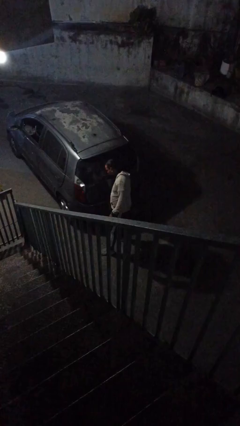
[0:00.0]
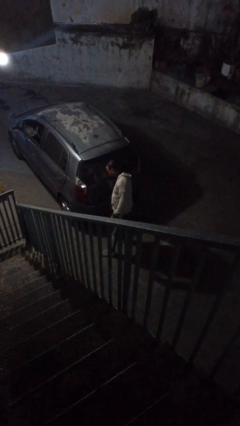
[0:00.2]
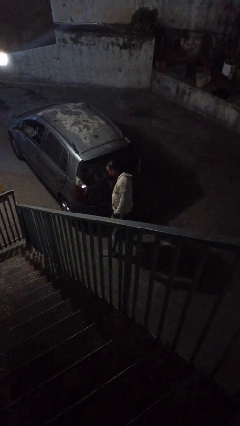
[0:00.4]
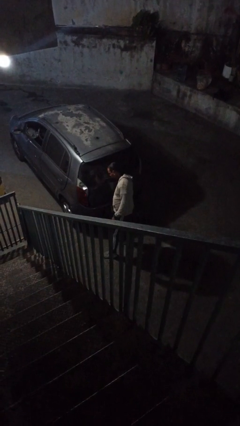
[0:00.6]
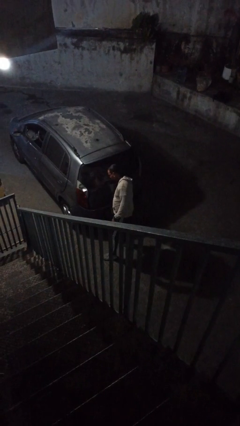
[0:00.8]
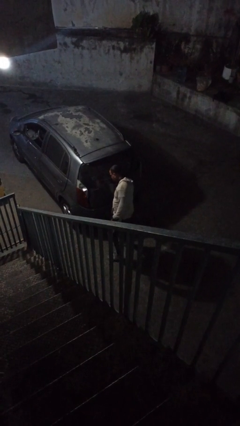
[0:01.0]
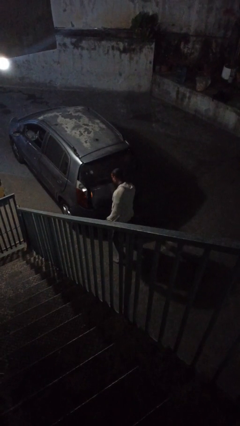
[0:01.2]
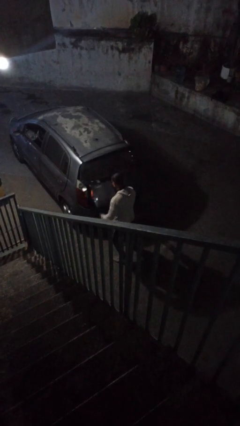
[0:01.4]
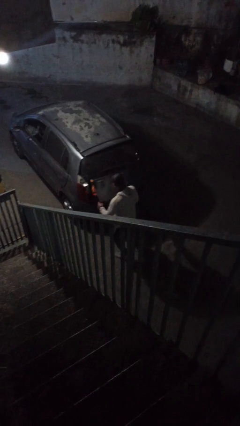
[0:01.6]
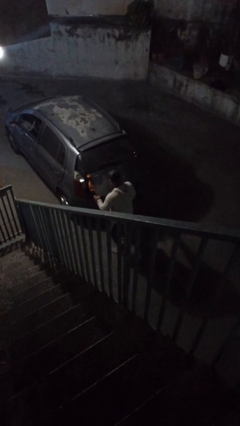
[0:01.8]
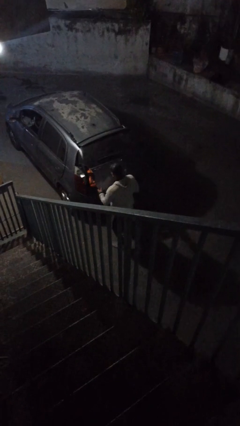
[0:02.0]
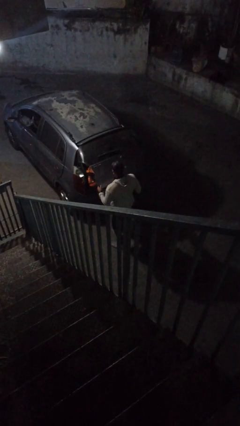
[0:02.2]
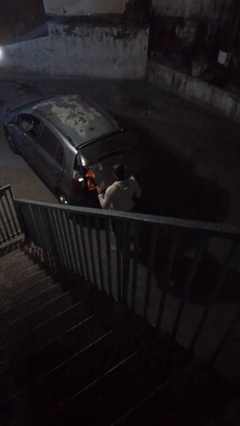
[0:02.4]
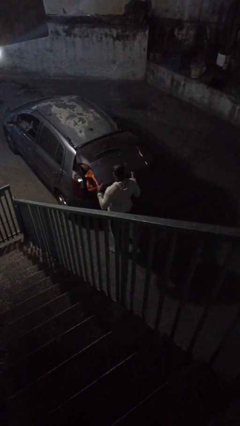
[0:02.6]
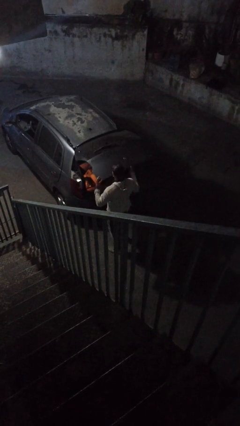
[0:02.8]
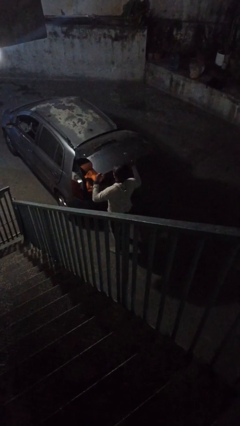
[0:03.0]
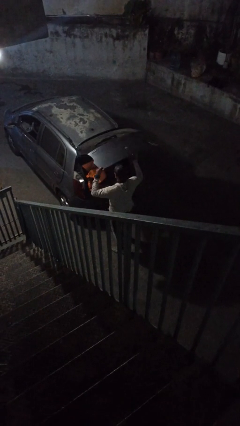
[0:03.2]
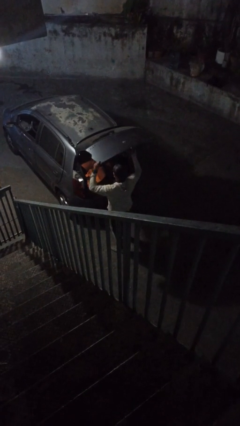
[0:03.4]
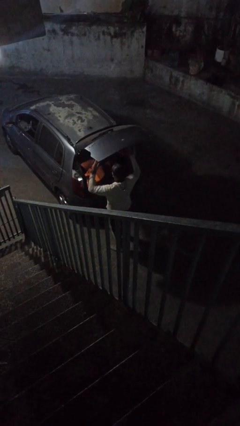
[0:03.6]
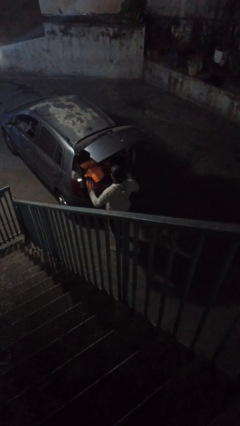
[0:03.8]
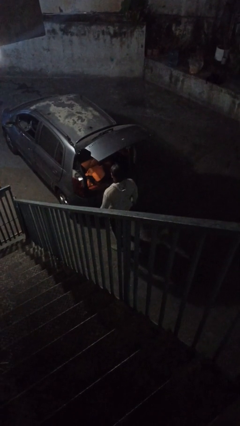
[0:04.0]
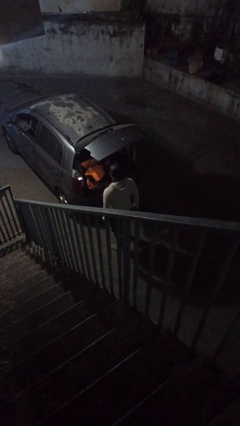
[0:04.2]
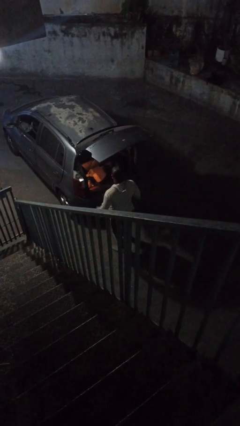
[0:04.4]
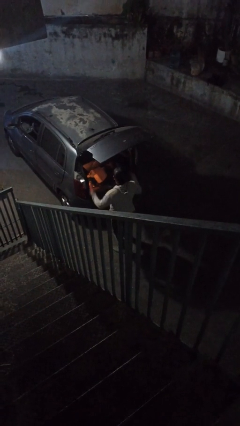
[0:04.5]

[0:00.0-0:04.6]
person opens car trunk

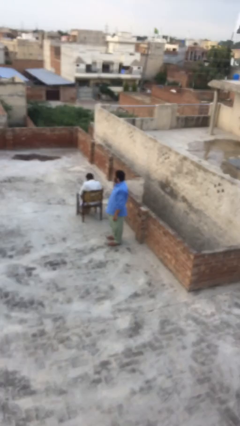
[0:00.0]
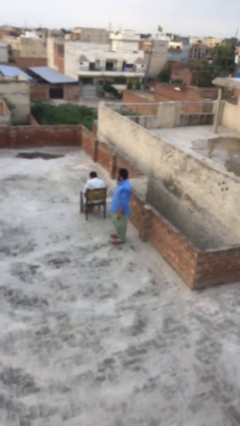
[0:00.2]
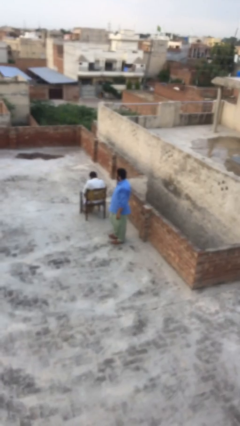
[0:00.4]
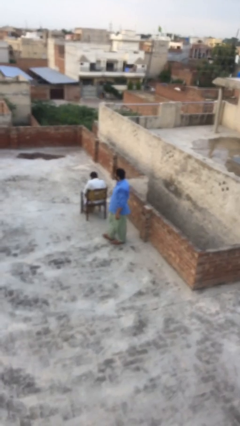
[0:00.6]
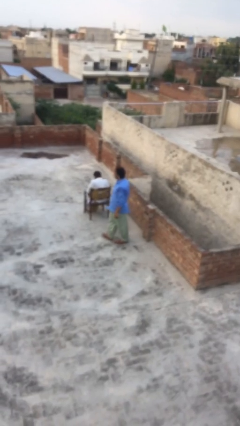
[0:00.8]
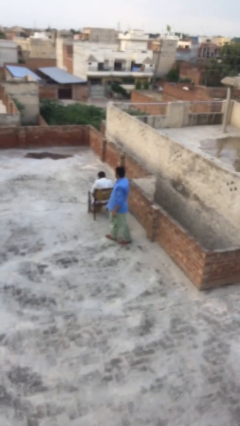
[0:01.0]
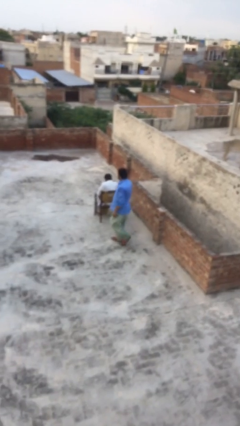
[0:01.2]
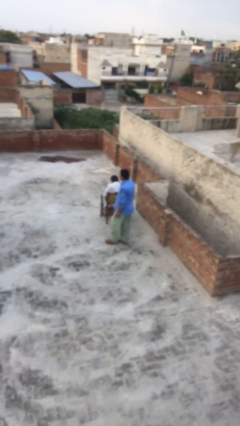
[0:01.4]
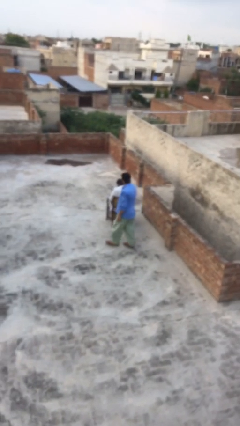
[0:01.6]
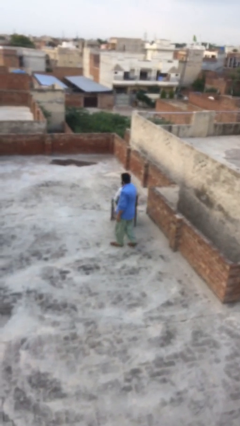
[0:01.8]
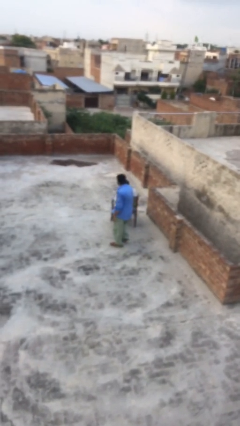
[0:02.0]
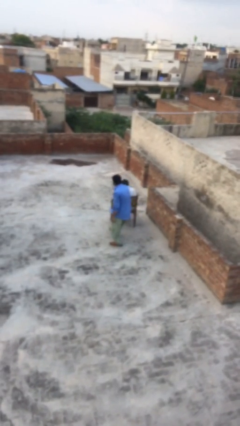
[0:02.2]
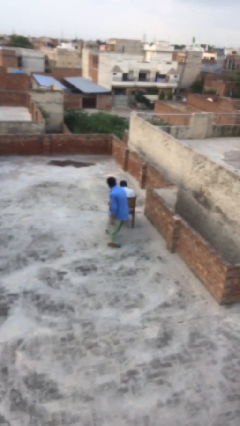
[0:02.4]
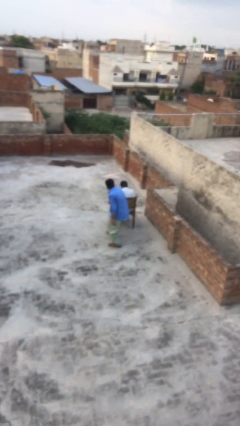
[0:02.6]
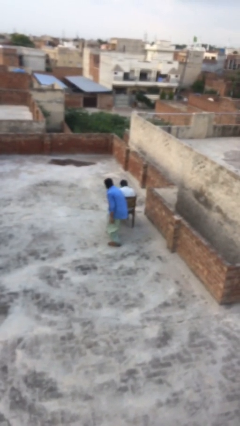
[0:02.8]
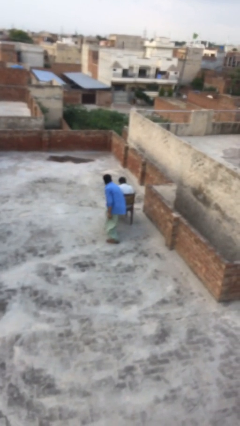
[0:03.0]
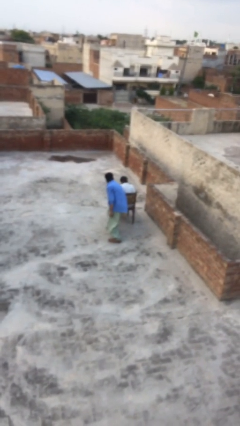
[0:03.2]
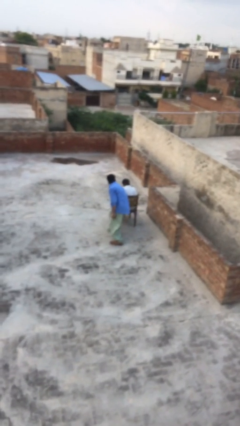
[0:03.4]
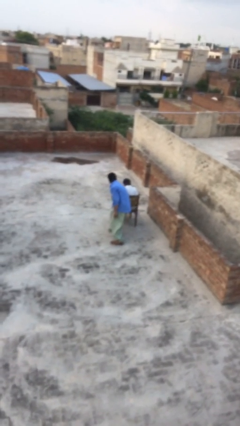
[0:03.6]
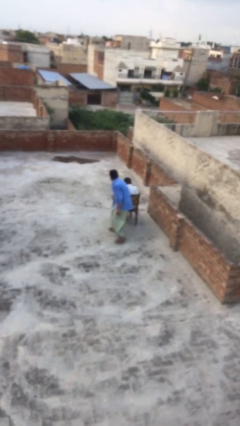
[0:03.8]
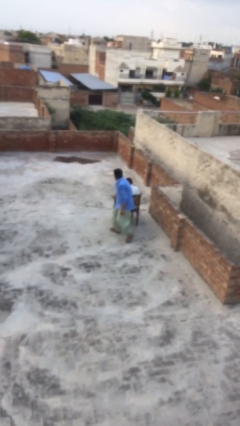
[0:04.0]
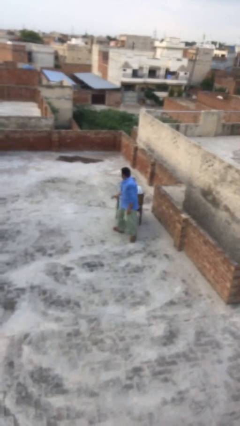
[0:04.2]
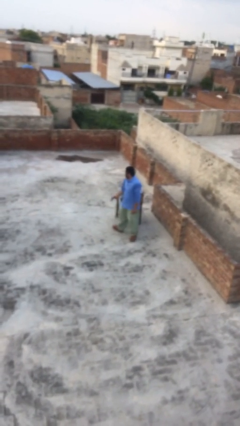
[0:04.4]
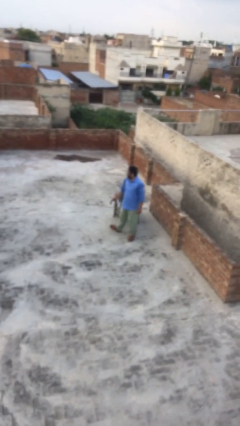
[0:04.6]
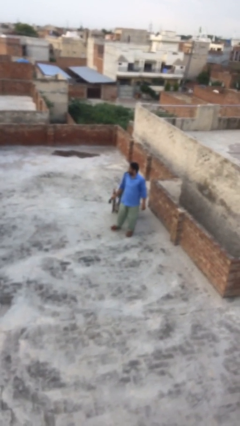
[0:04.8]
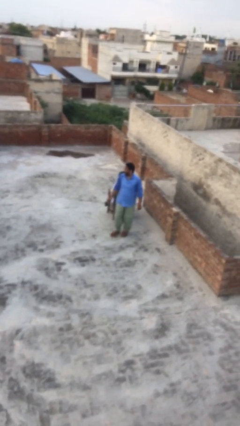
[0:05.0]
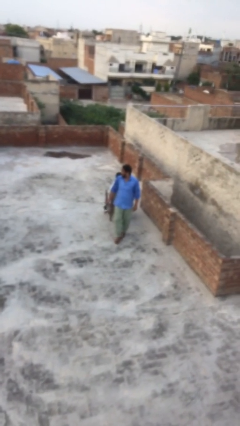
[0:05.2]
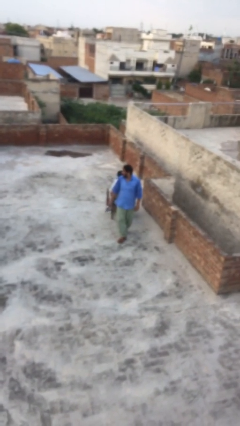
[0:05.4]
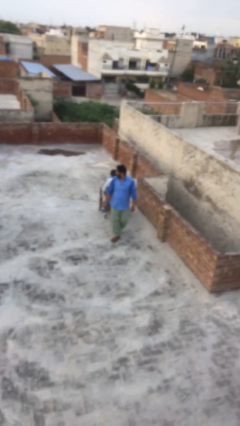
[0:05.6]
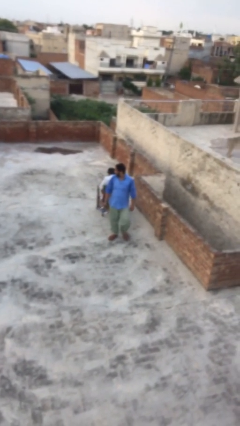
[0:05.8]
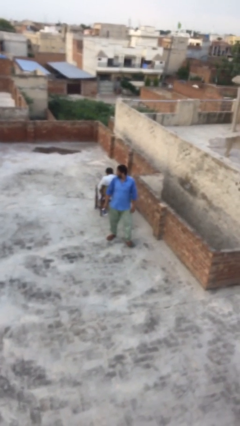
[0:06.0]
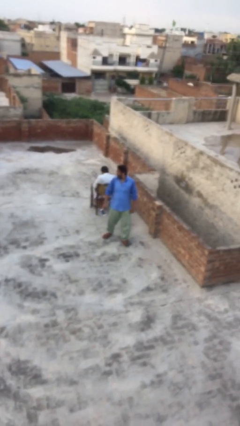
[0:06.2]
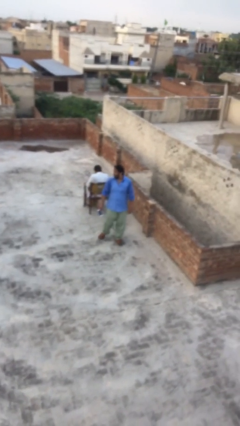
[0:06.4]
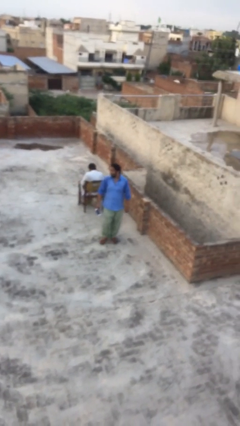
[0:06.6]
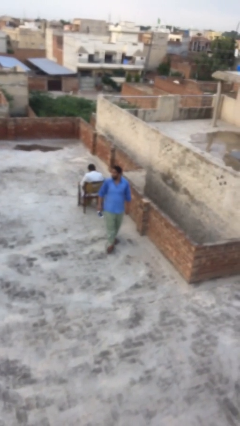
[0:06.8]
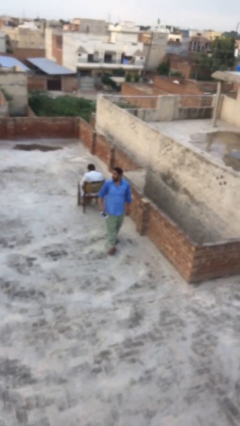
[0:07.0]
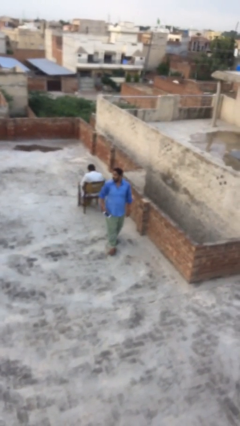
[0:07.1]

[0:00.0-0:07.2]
person steals object from person

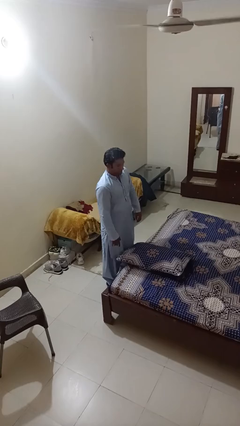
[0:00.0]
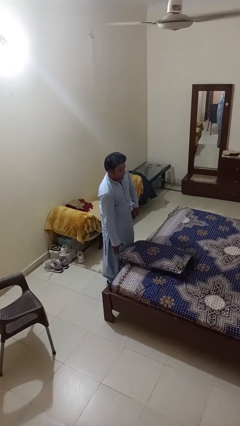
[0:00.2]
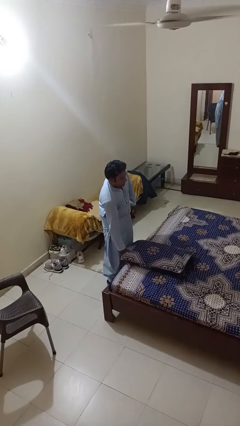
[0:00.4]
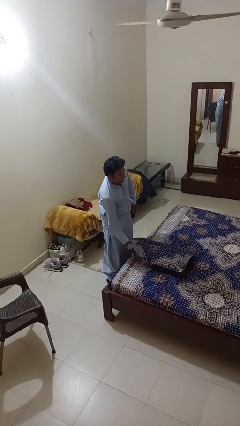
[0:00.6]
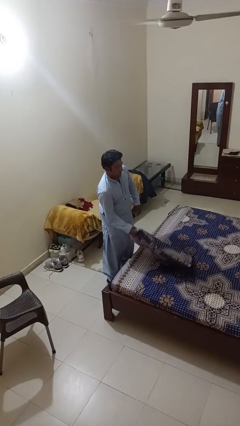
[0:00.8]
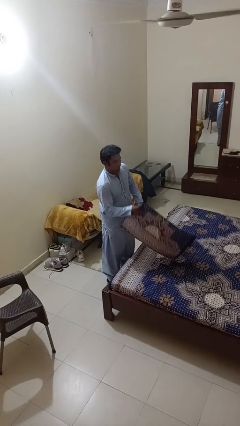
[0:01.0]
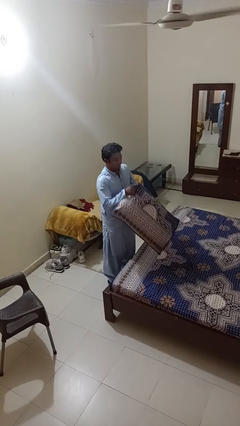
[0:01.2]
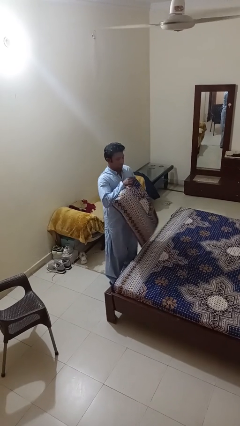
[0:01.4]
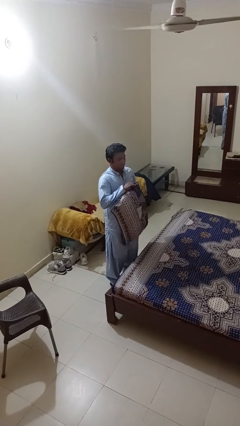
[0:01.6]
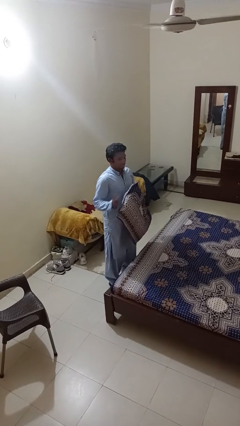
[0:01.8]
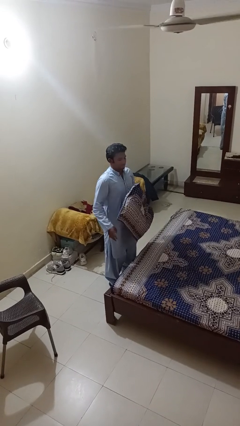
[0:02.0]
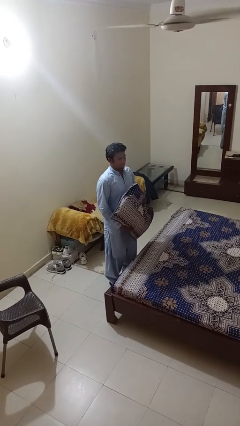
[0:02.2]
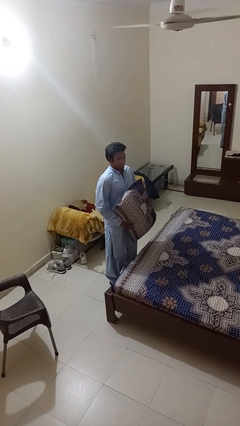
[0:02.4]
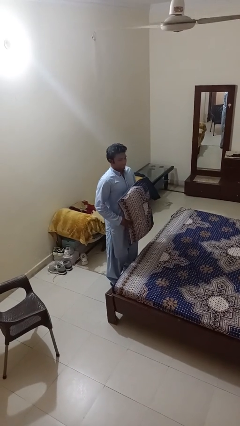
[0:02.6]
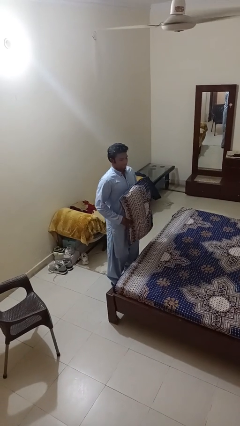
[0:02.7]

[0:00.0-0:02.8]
person picks up object from bed

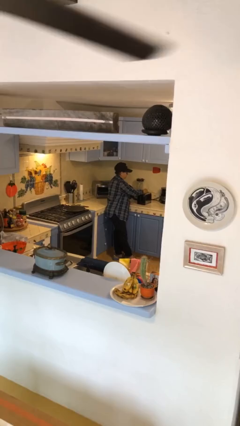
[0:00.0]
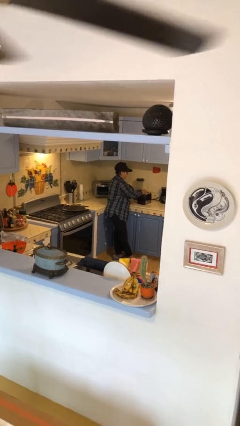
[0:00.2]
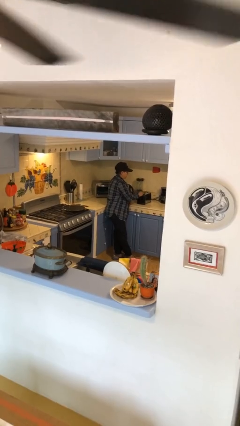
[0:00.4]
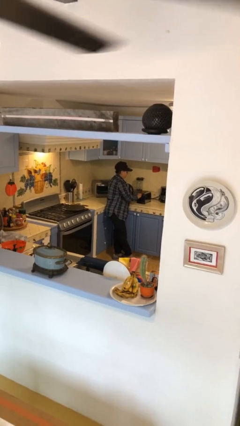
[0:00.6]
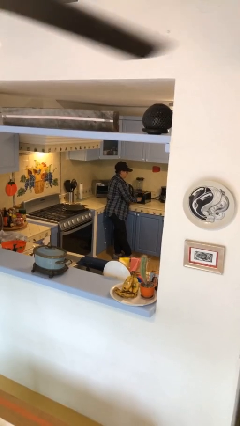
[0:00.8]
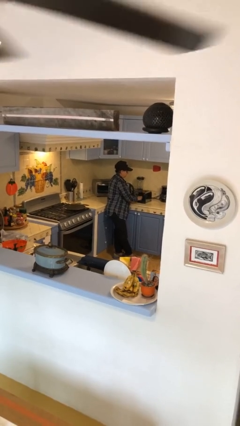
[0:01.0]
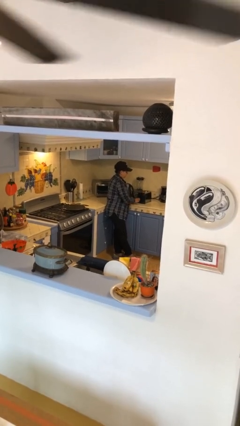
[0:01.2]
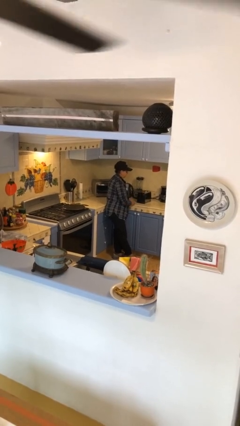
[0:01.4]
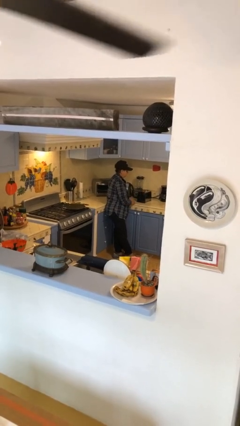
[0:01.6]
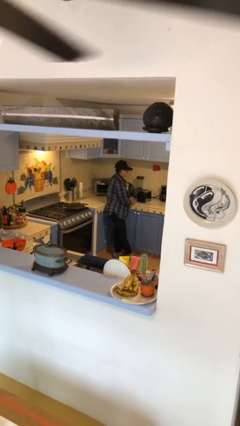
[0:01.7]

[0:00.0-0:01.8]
person puts object into toaster

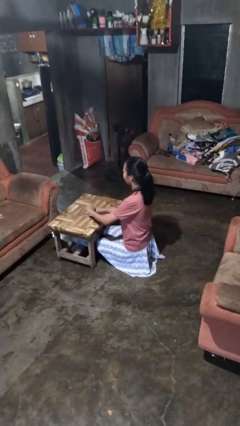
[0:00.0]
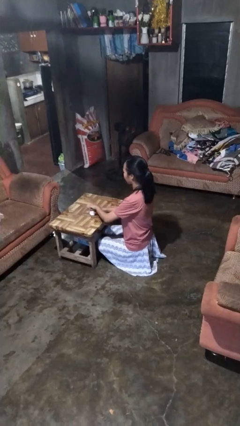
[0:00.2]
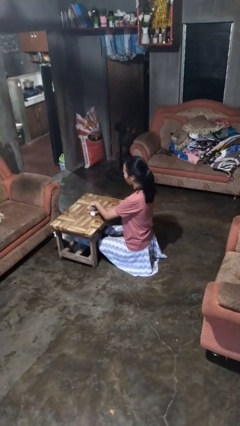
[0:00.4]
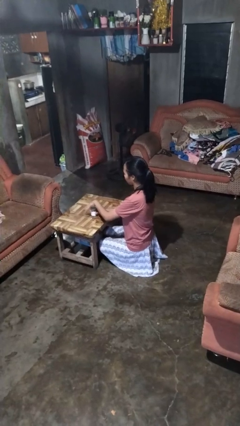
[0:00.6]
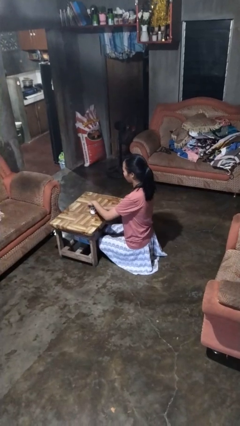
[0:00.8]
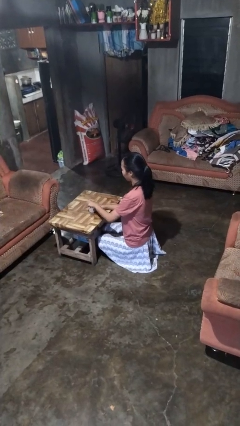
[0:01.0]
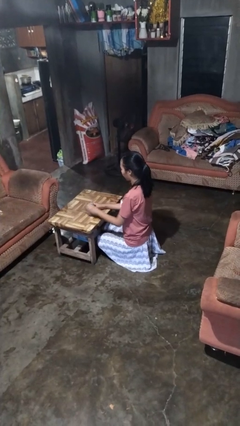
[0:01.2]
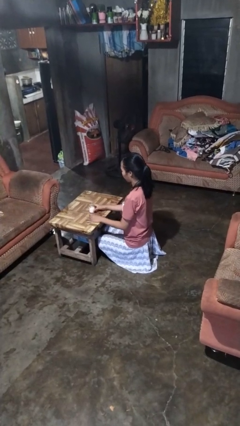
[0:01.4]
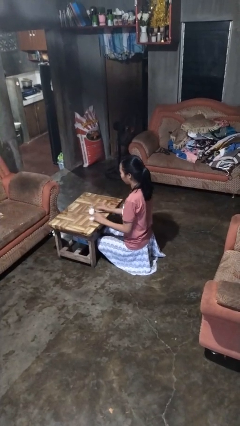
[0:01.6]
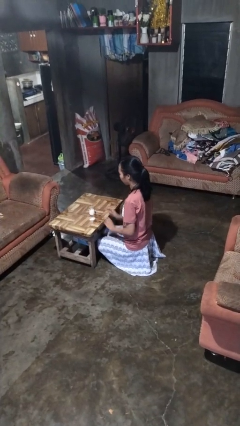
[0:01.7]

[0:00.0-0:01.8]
person opens jar
